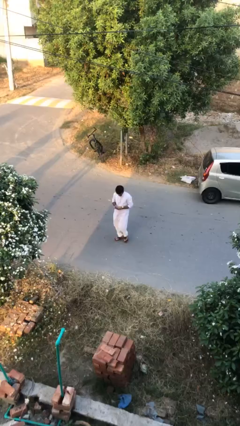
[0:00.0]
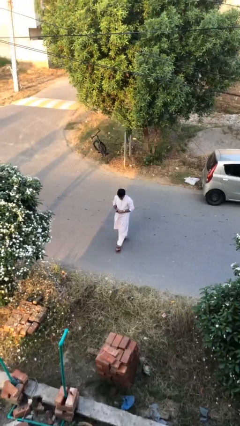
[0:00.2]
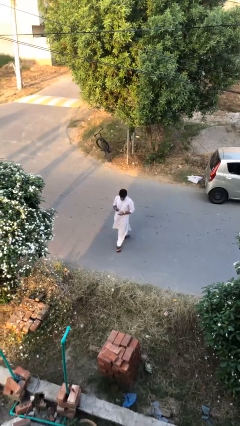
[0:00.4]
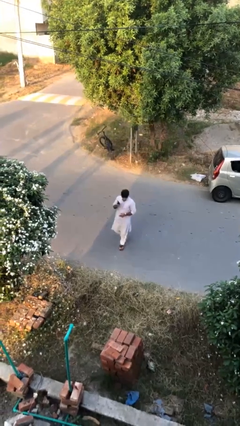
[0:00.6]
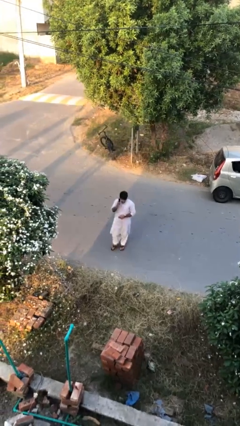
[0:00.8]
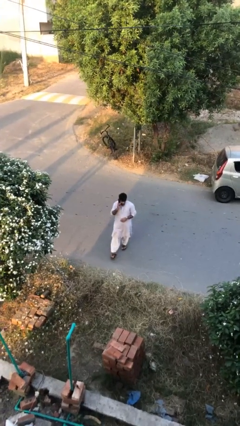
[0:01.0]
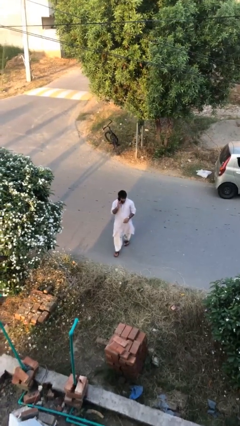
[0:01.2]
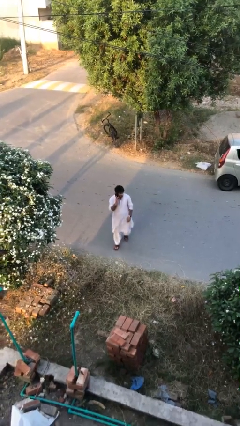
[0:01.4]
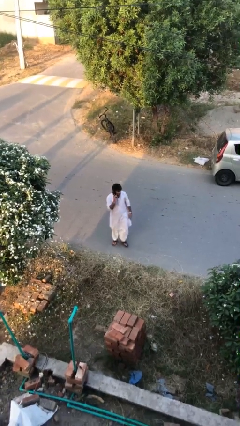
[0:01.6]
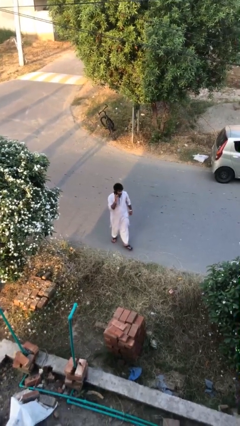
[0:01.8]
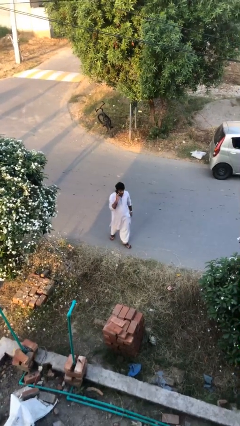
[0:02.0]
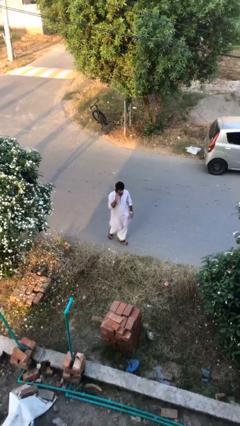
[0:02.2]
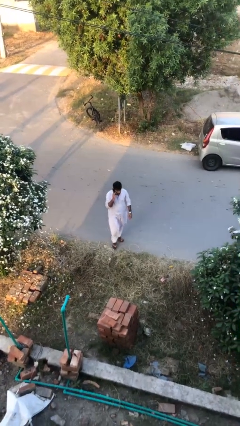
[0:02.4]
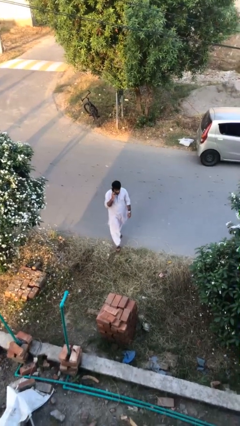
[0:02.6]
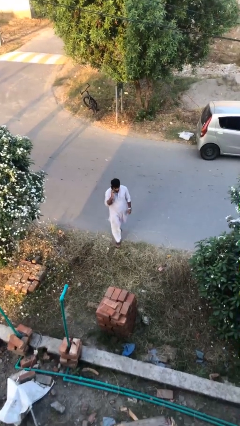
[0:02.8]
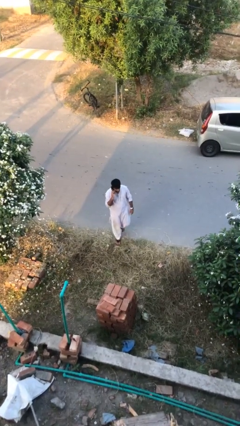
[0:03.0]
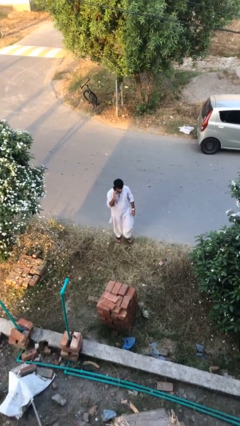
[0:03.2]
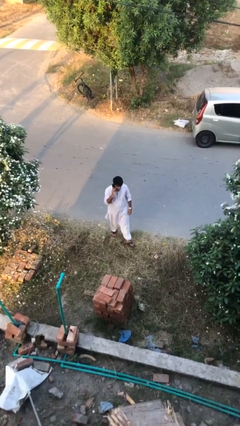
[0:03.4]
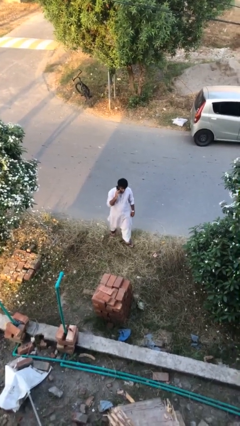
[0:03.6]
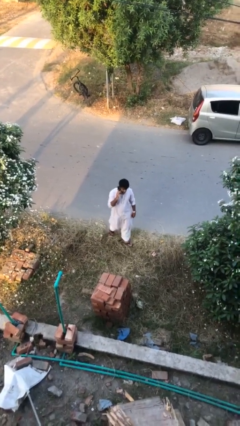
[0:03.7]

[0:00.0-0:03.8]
person talks on phone

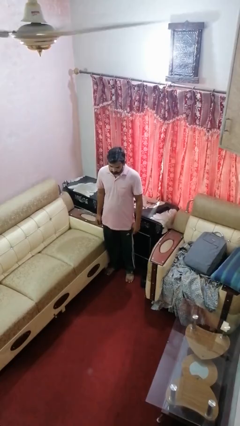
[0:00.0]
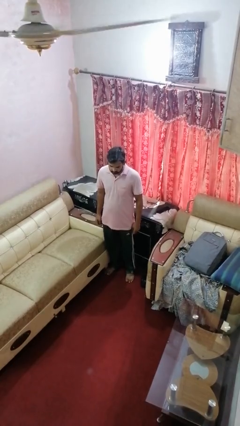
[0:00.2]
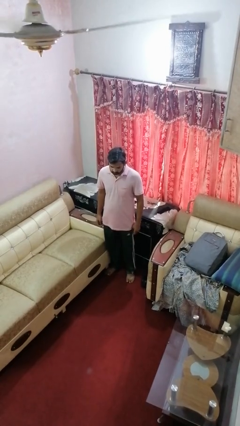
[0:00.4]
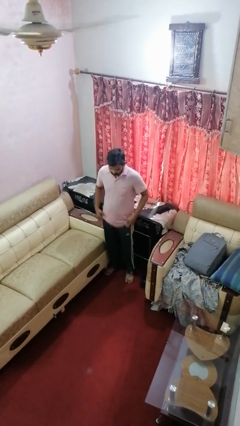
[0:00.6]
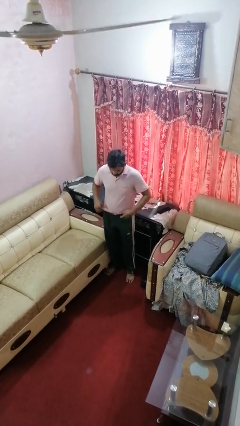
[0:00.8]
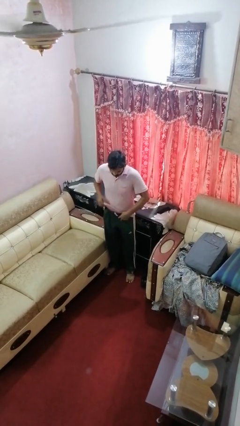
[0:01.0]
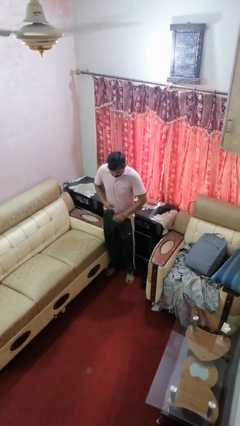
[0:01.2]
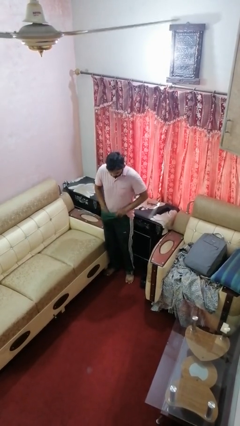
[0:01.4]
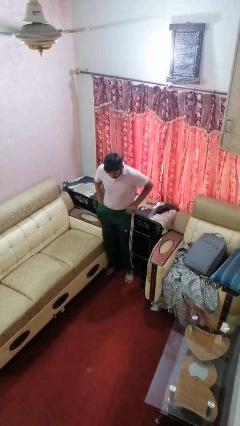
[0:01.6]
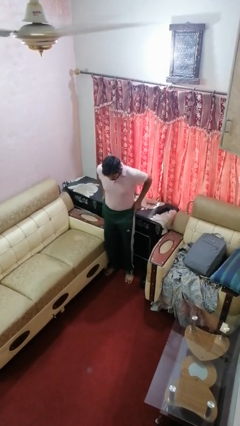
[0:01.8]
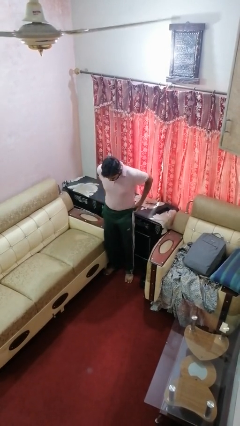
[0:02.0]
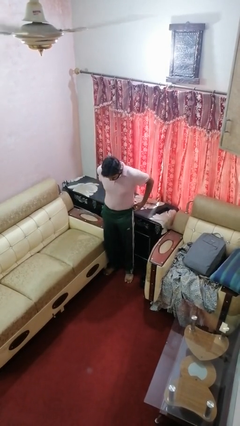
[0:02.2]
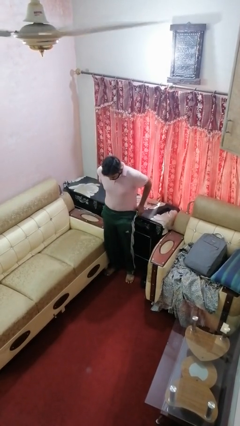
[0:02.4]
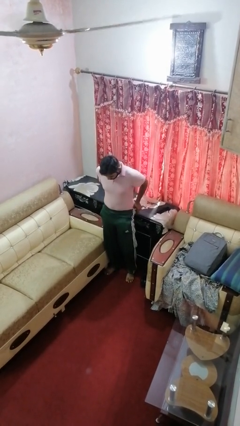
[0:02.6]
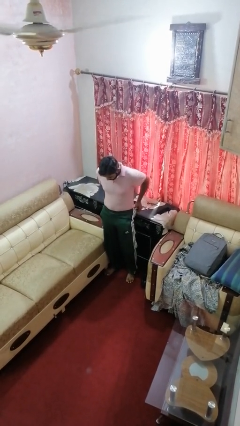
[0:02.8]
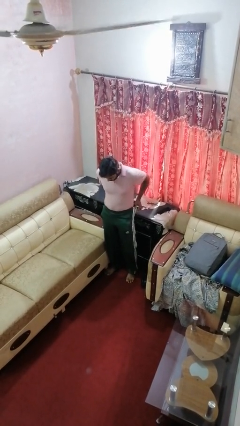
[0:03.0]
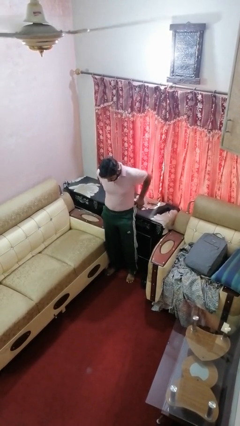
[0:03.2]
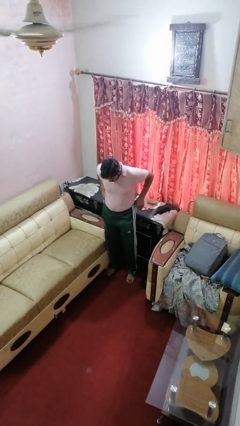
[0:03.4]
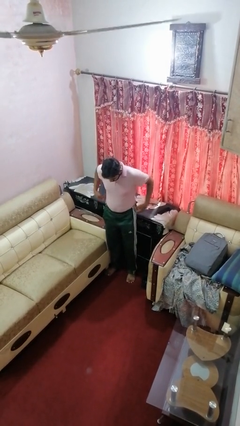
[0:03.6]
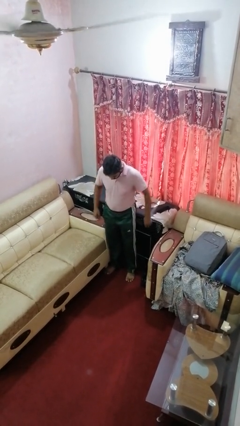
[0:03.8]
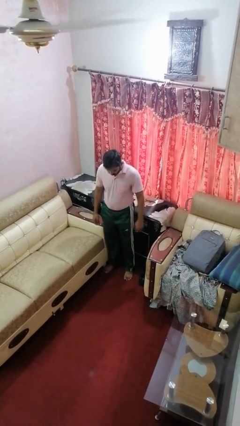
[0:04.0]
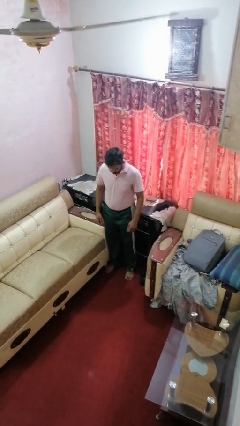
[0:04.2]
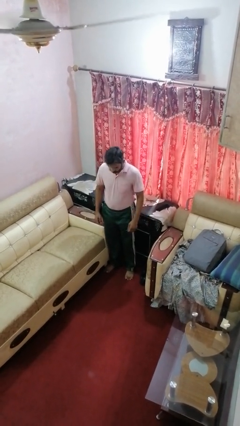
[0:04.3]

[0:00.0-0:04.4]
person tucks in shirt

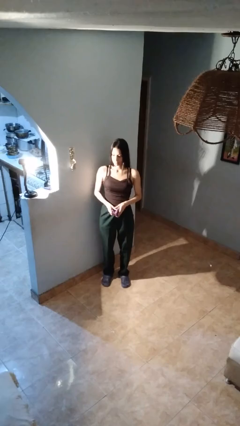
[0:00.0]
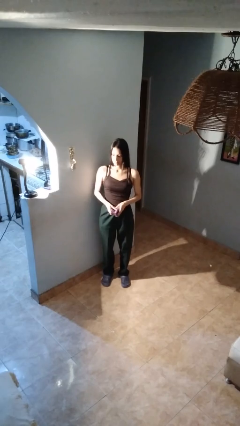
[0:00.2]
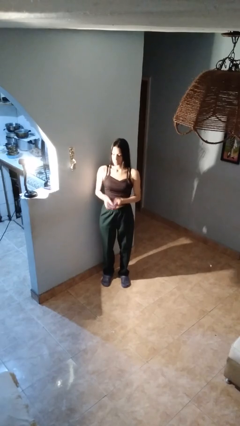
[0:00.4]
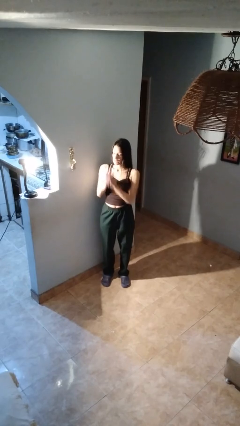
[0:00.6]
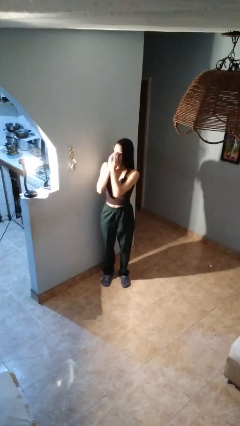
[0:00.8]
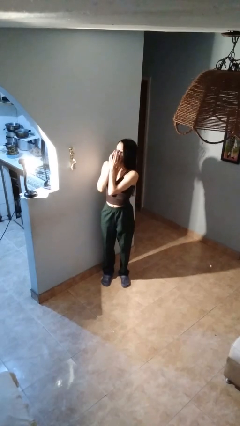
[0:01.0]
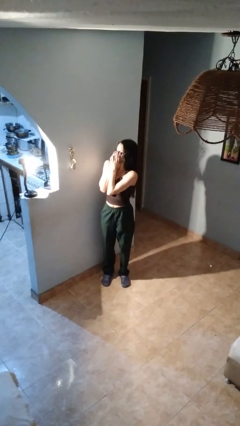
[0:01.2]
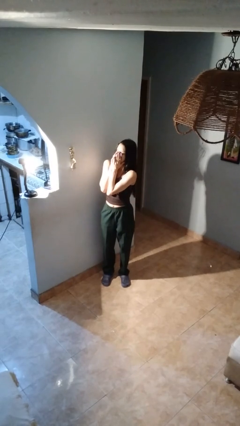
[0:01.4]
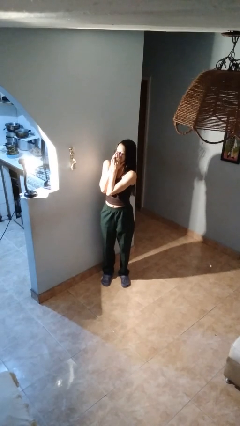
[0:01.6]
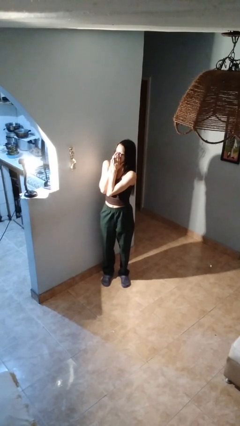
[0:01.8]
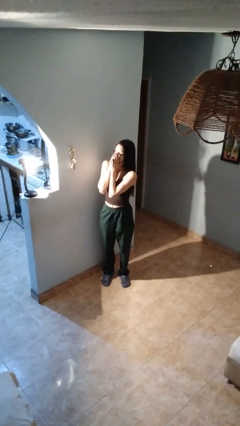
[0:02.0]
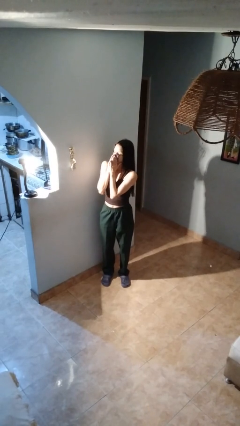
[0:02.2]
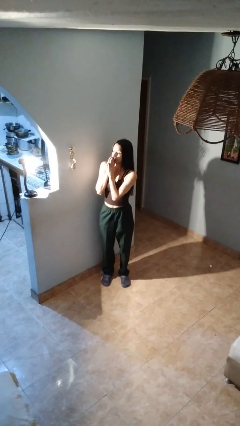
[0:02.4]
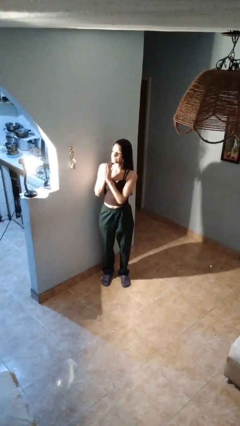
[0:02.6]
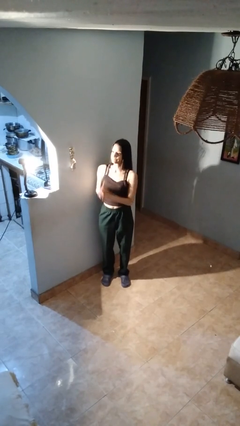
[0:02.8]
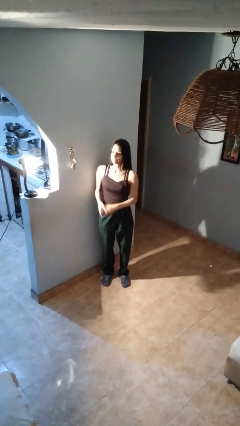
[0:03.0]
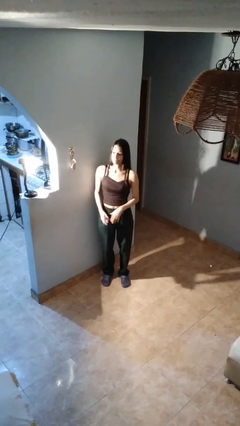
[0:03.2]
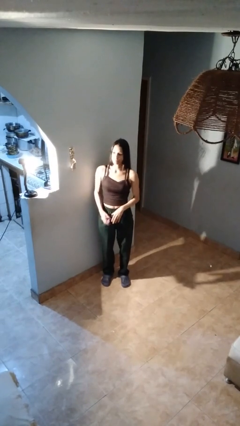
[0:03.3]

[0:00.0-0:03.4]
person blows nose

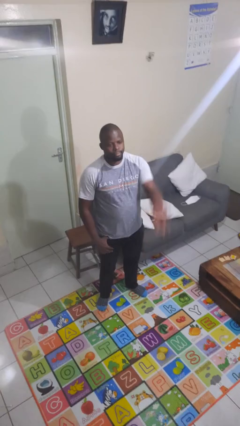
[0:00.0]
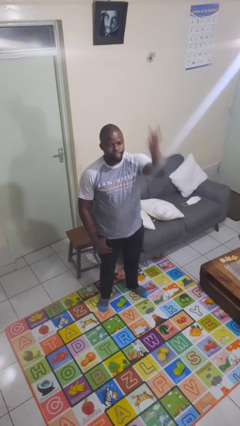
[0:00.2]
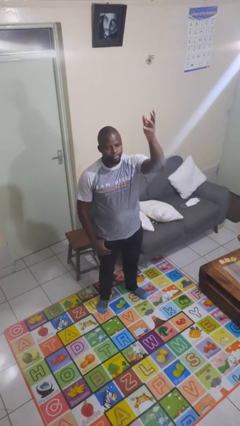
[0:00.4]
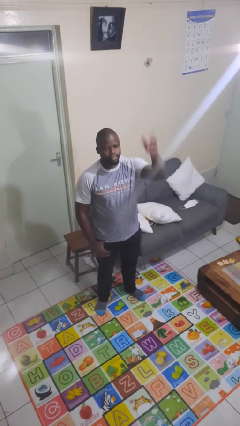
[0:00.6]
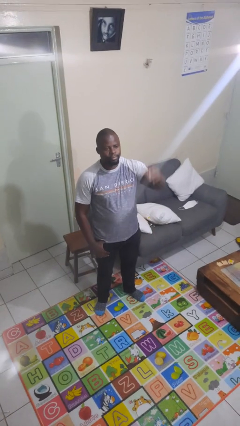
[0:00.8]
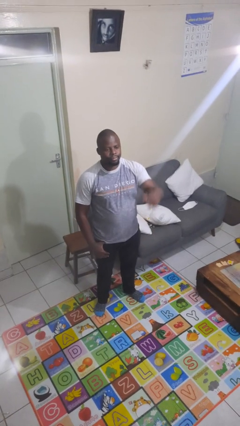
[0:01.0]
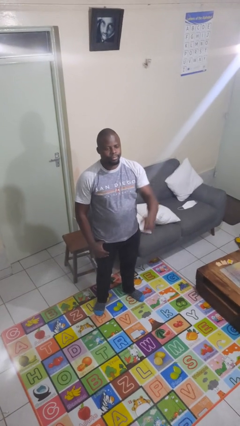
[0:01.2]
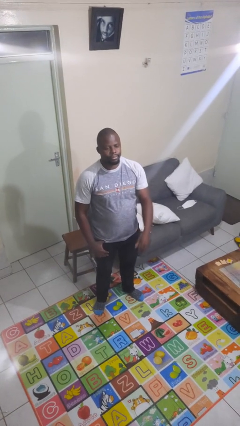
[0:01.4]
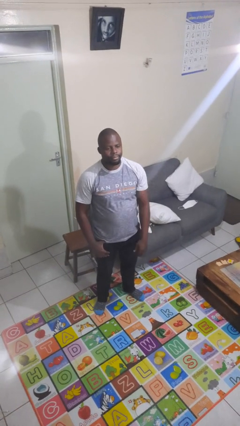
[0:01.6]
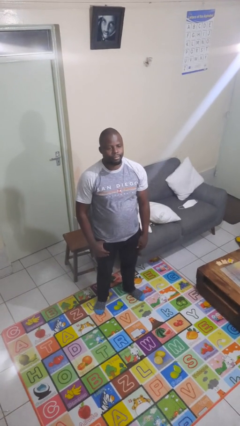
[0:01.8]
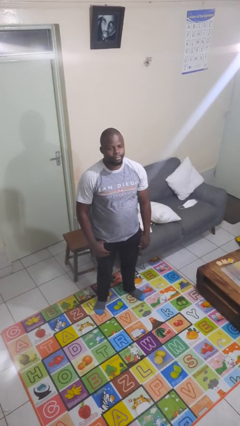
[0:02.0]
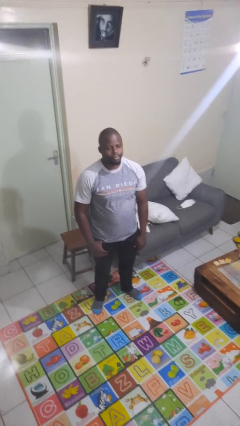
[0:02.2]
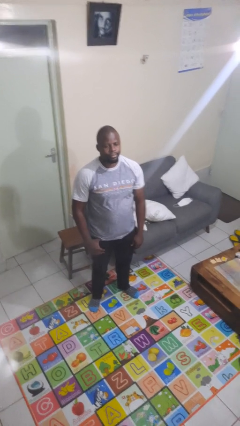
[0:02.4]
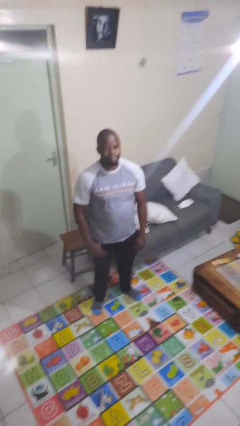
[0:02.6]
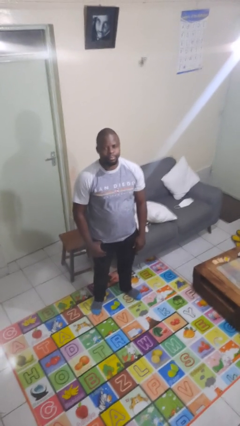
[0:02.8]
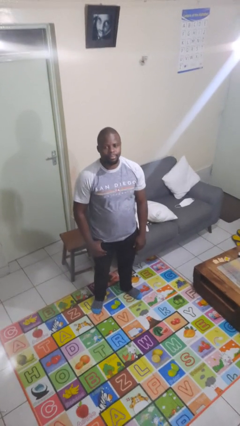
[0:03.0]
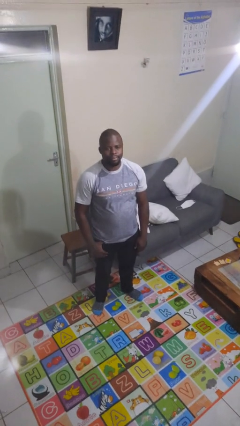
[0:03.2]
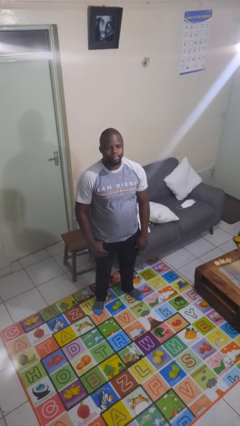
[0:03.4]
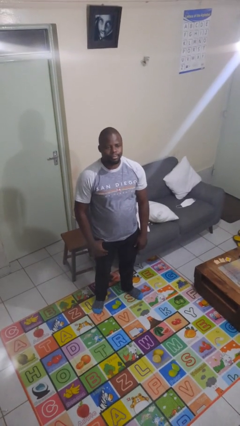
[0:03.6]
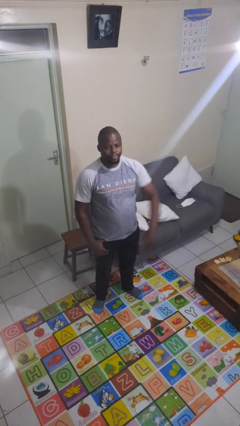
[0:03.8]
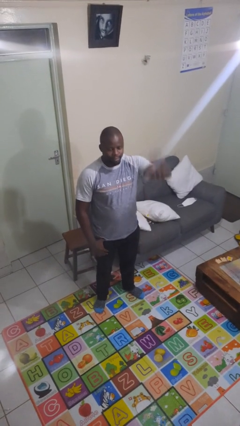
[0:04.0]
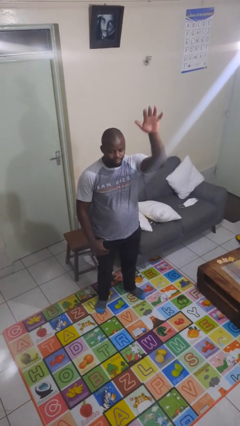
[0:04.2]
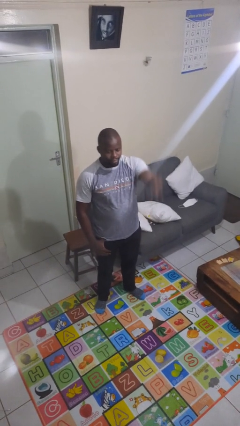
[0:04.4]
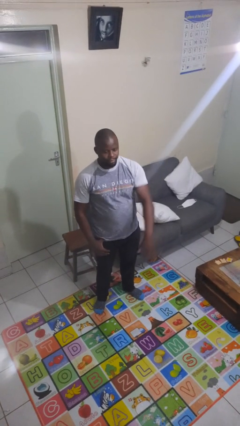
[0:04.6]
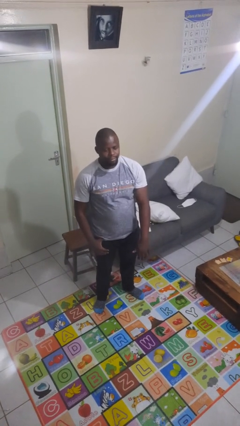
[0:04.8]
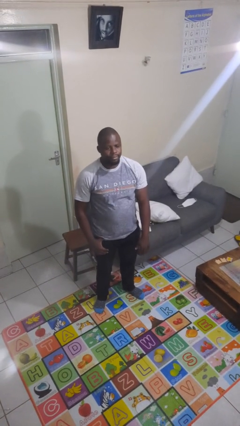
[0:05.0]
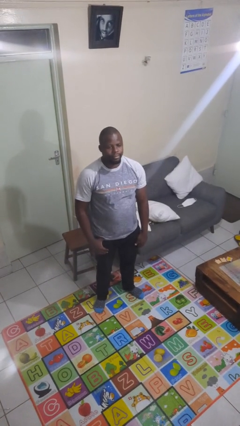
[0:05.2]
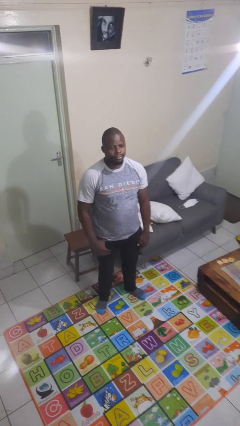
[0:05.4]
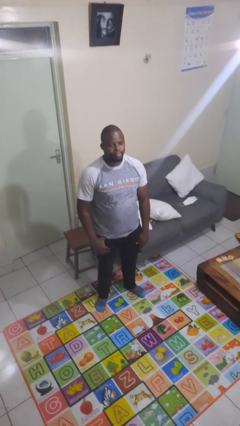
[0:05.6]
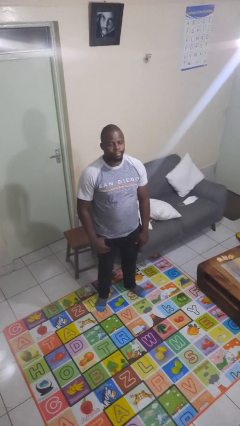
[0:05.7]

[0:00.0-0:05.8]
person gestures swipe down

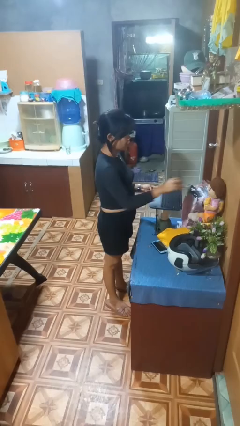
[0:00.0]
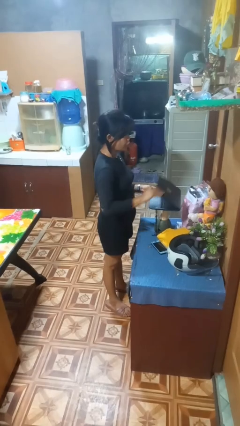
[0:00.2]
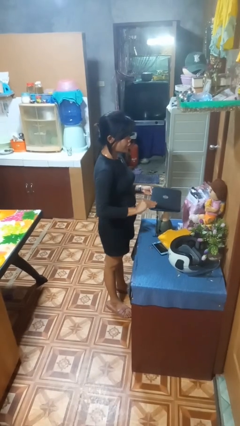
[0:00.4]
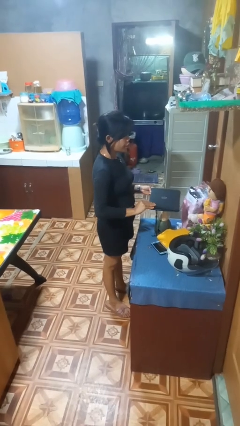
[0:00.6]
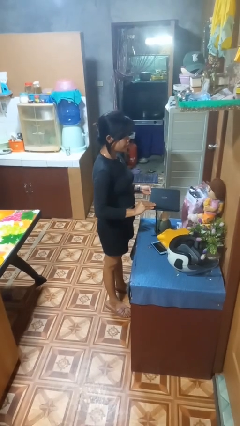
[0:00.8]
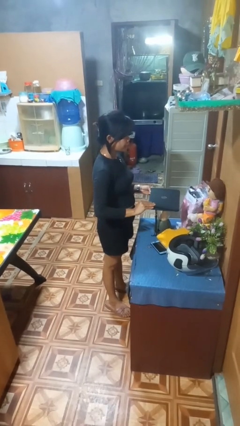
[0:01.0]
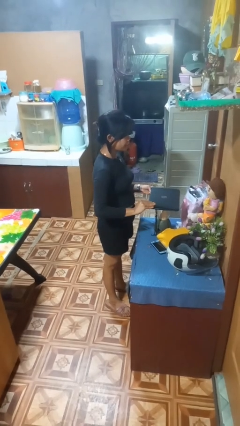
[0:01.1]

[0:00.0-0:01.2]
person closes laptop
